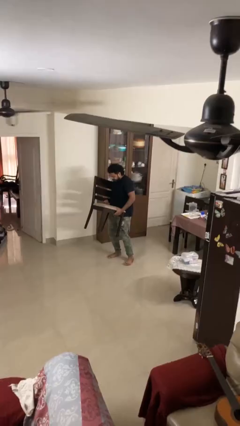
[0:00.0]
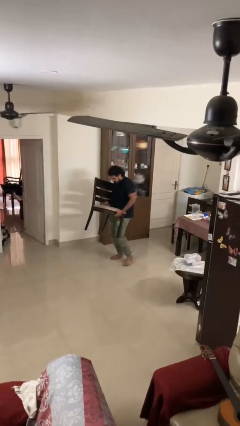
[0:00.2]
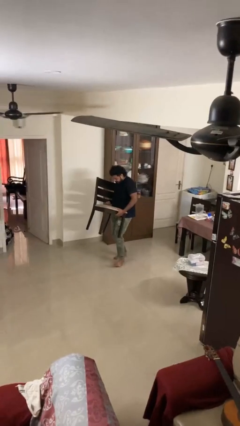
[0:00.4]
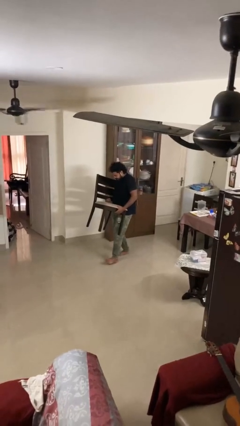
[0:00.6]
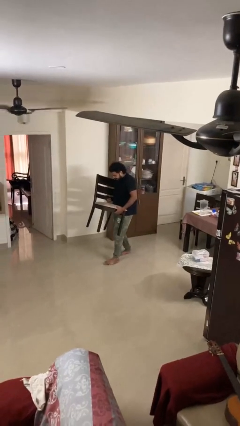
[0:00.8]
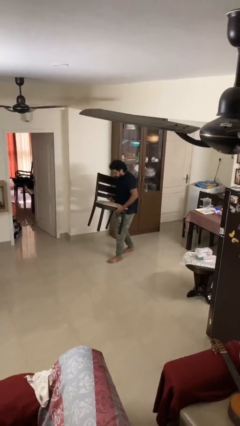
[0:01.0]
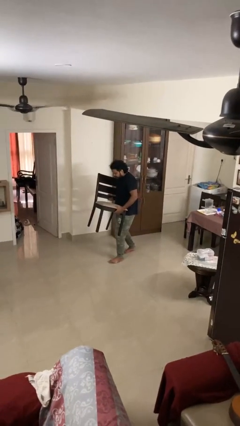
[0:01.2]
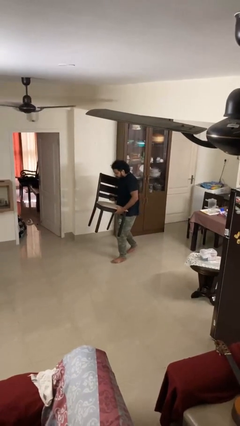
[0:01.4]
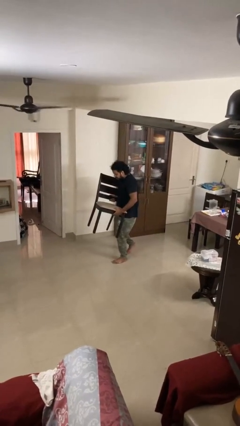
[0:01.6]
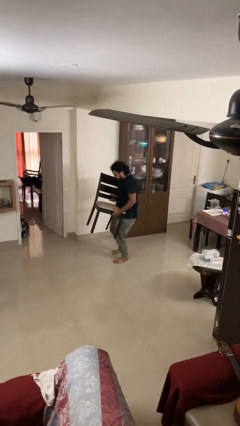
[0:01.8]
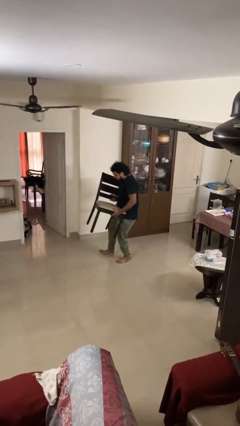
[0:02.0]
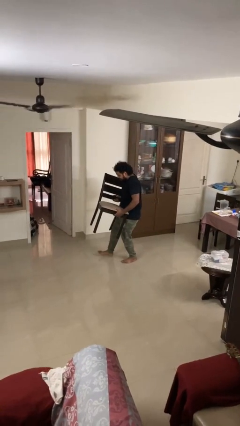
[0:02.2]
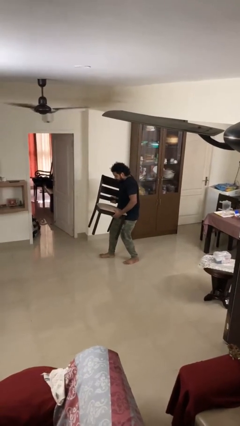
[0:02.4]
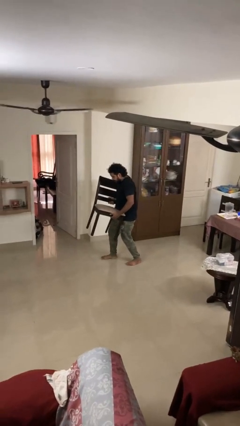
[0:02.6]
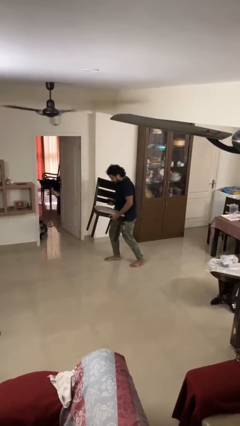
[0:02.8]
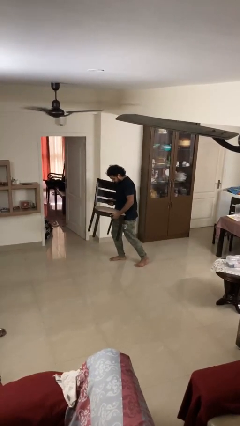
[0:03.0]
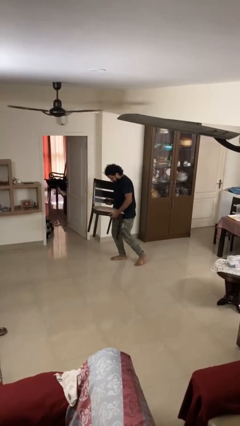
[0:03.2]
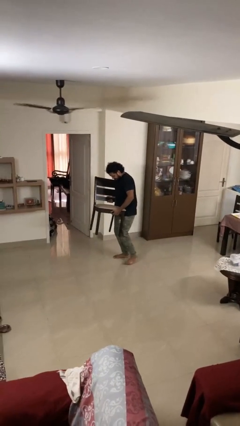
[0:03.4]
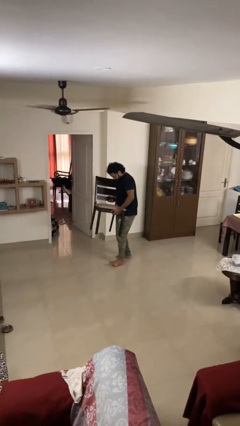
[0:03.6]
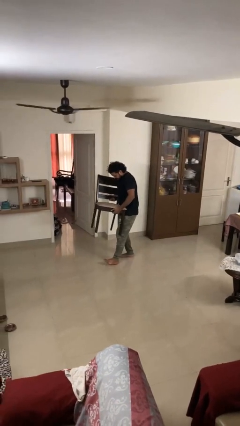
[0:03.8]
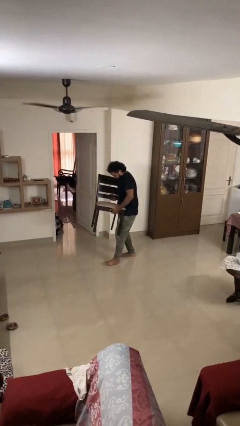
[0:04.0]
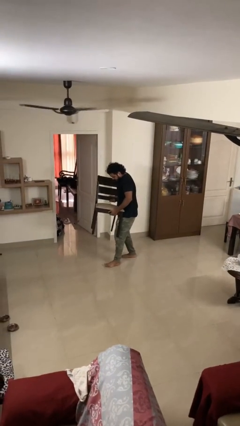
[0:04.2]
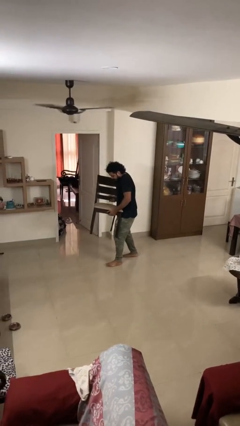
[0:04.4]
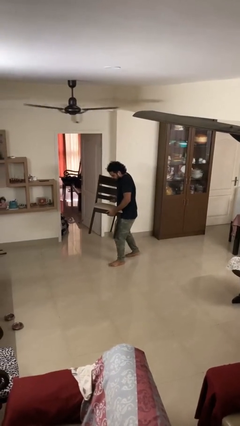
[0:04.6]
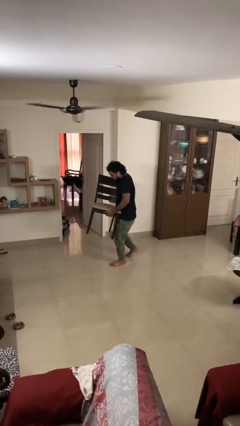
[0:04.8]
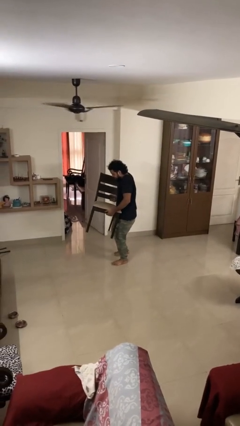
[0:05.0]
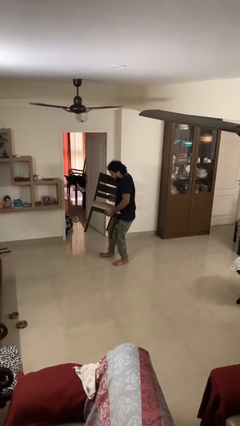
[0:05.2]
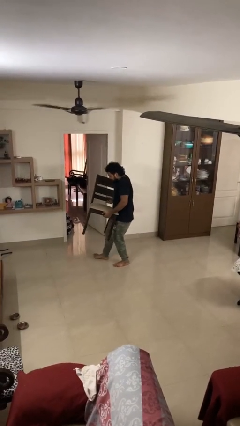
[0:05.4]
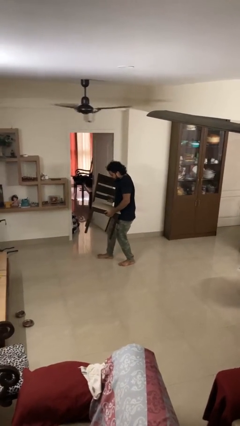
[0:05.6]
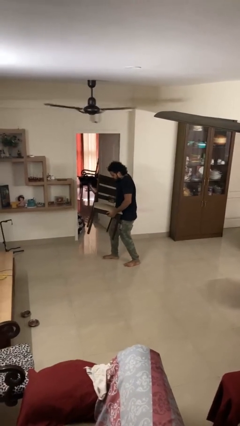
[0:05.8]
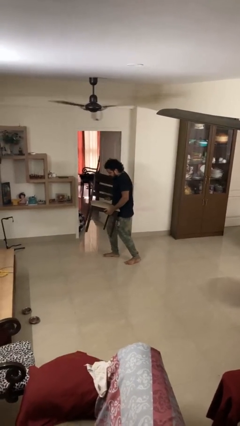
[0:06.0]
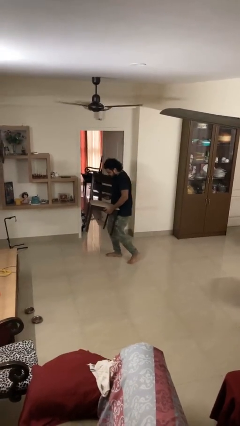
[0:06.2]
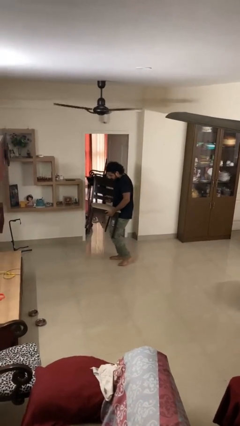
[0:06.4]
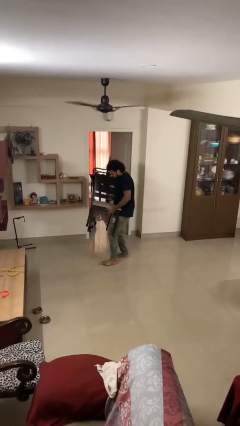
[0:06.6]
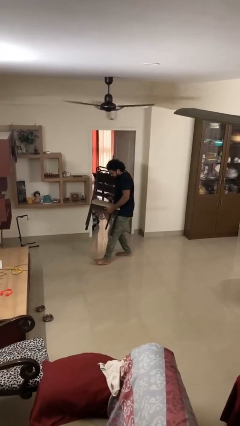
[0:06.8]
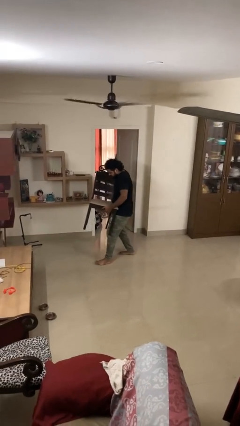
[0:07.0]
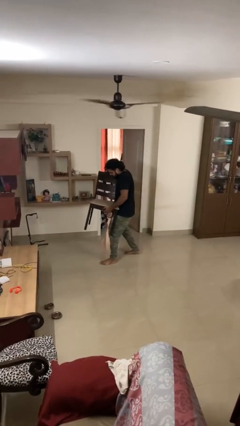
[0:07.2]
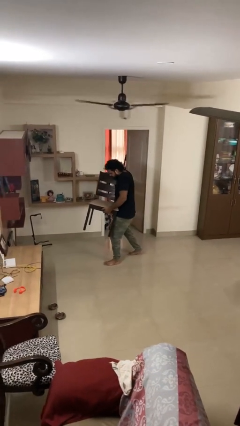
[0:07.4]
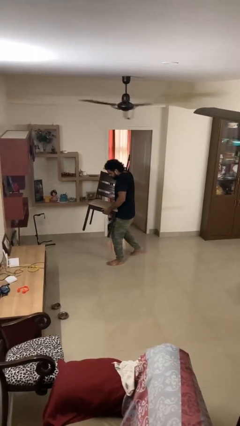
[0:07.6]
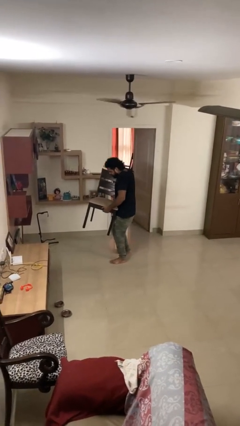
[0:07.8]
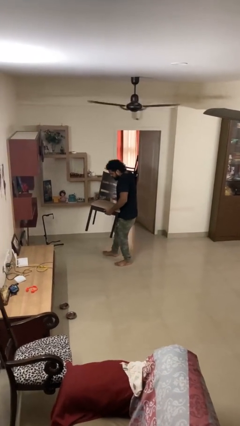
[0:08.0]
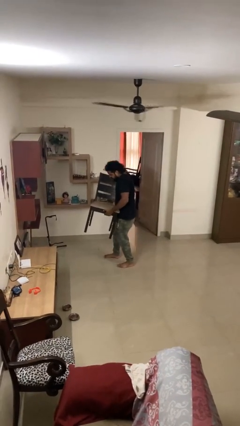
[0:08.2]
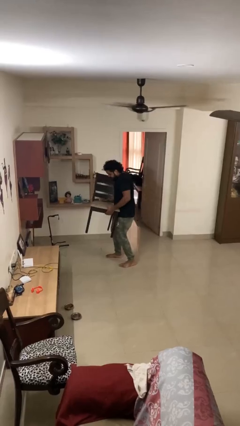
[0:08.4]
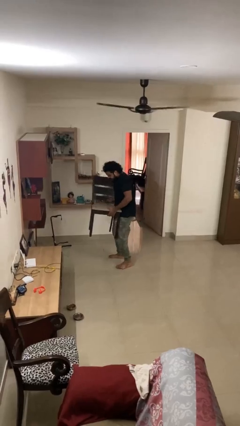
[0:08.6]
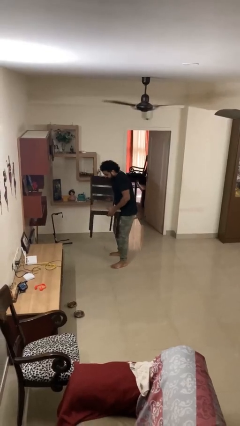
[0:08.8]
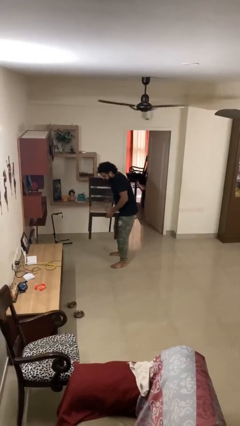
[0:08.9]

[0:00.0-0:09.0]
person carries heavy object

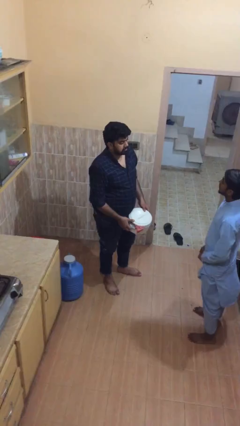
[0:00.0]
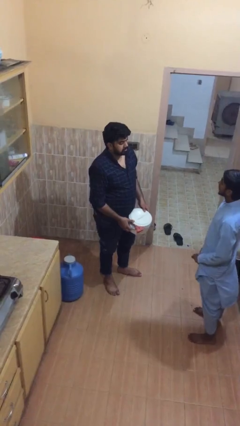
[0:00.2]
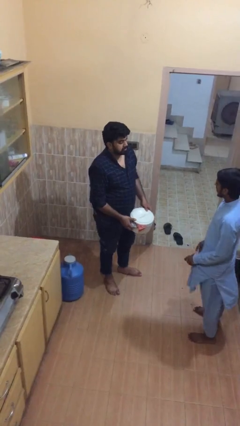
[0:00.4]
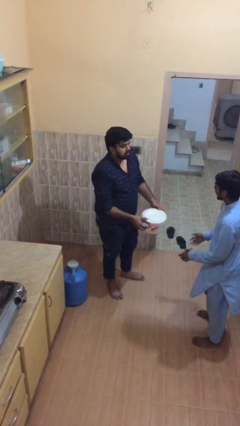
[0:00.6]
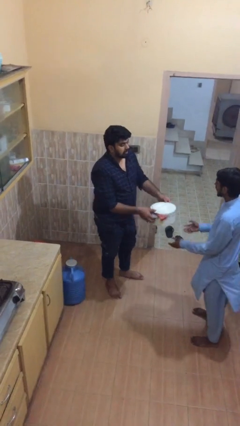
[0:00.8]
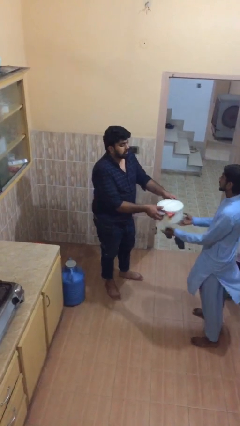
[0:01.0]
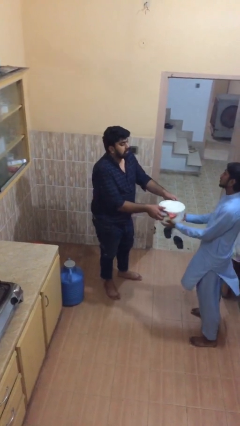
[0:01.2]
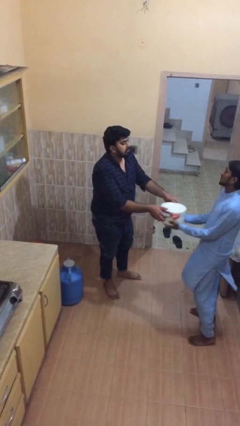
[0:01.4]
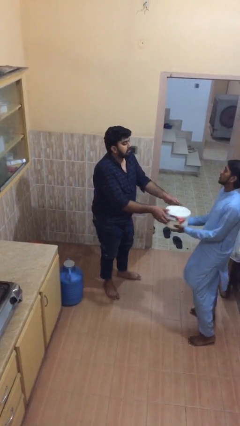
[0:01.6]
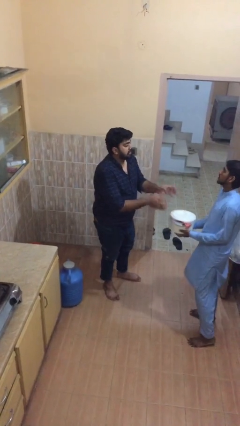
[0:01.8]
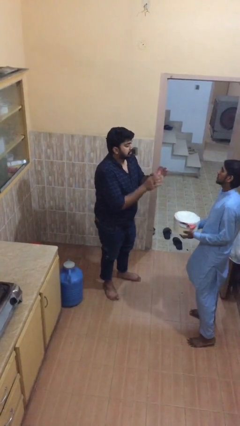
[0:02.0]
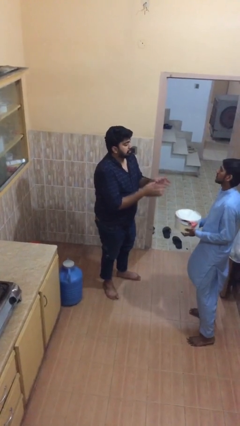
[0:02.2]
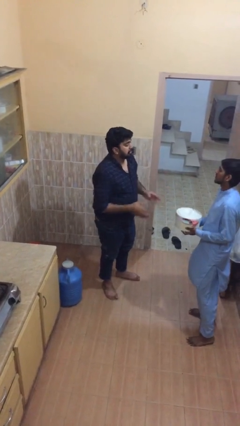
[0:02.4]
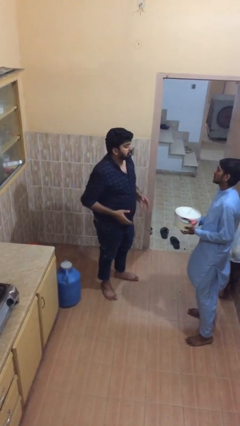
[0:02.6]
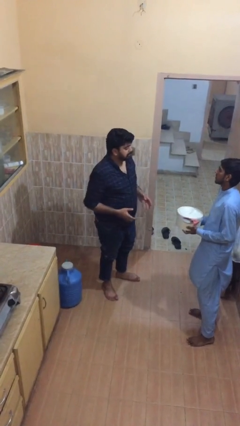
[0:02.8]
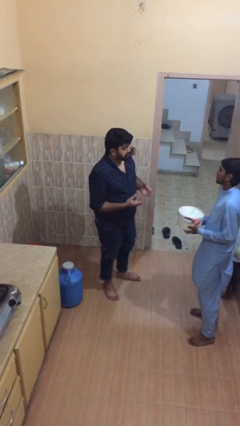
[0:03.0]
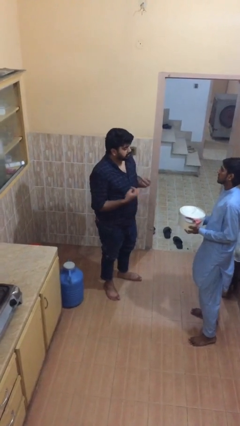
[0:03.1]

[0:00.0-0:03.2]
person transfers object to person

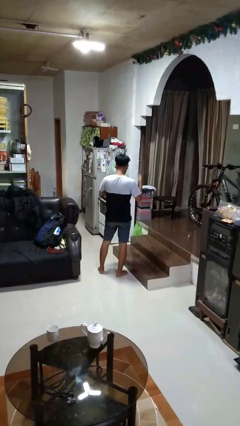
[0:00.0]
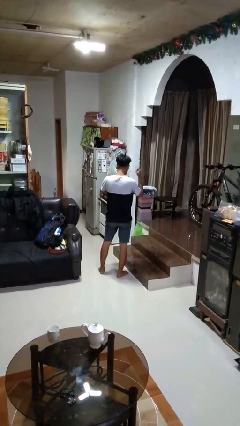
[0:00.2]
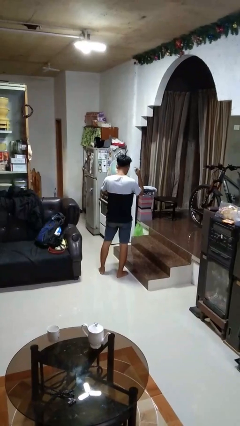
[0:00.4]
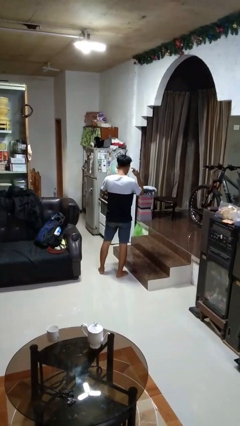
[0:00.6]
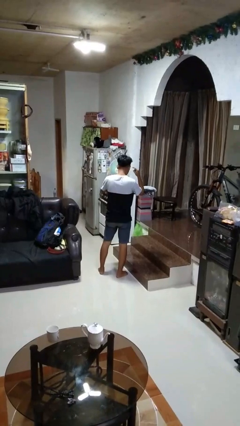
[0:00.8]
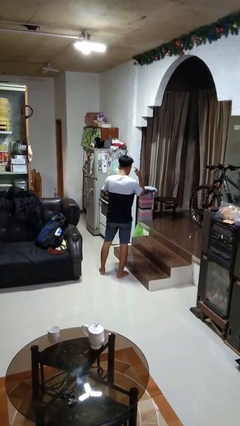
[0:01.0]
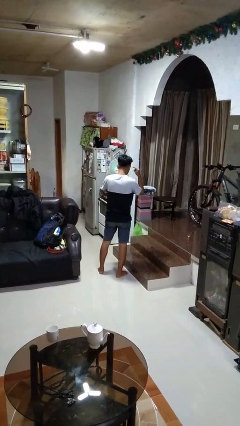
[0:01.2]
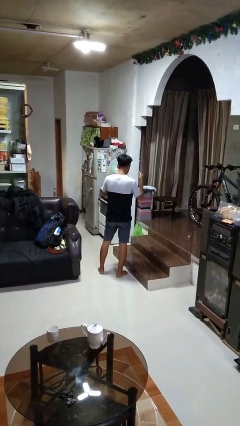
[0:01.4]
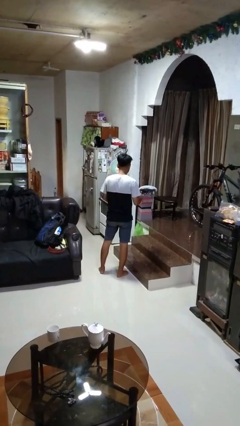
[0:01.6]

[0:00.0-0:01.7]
person gestures listen closely

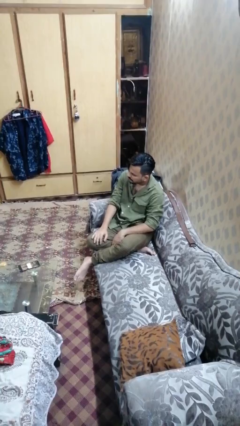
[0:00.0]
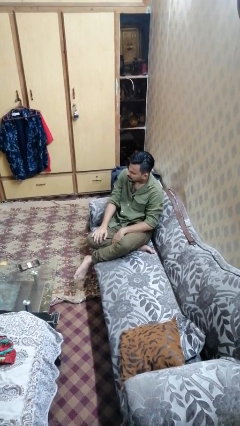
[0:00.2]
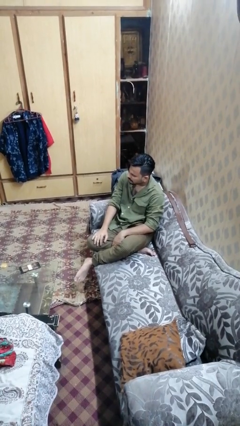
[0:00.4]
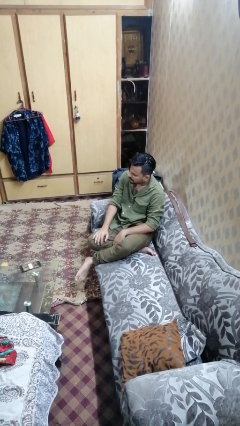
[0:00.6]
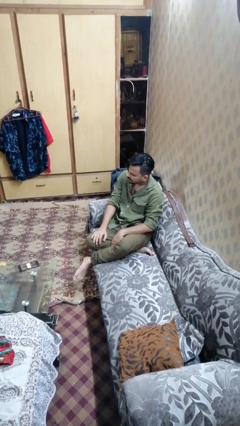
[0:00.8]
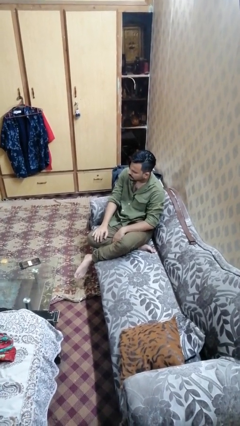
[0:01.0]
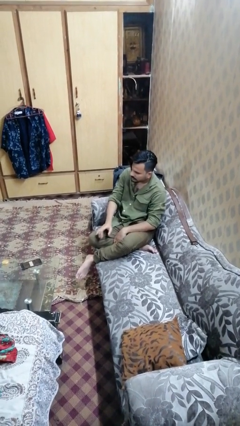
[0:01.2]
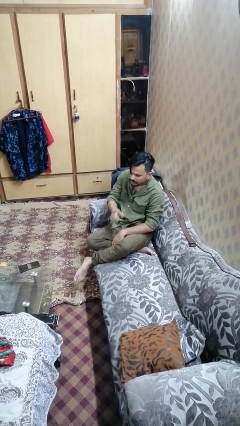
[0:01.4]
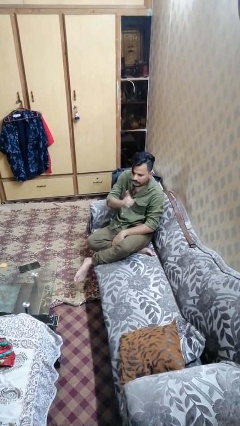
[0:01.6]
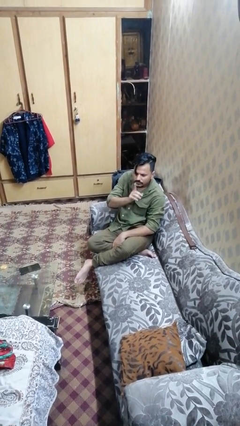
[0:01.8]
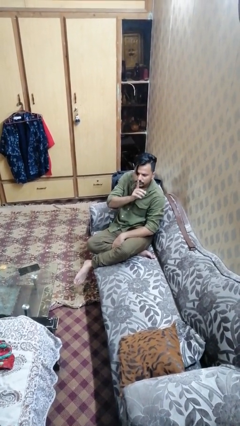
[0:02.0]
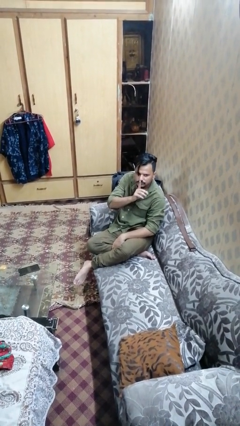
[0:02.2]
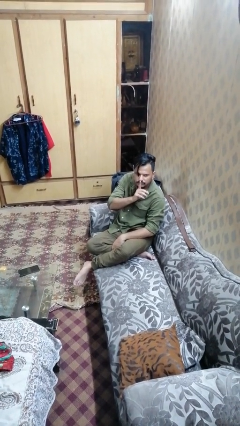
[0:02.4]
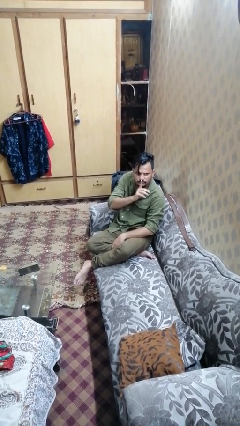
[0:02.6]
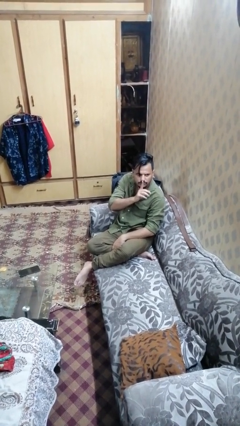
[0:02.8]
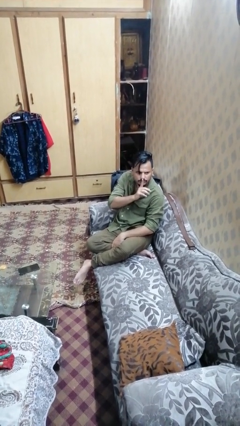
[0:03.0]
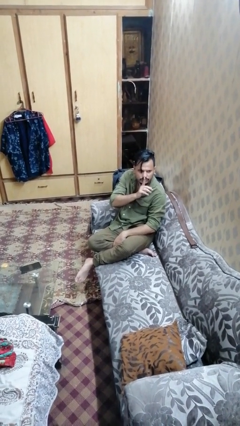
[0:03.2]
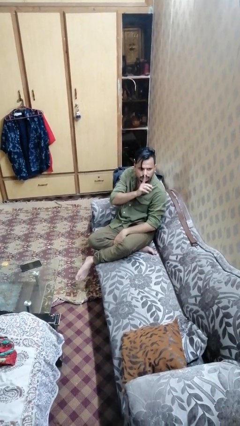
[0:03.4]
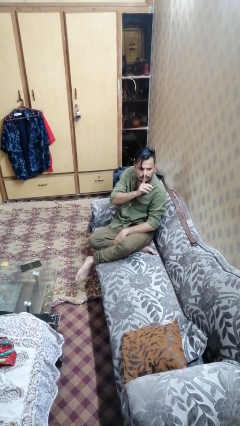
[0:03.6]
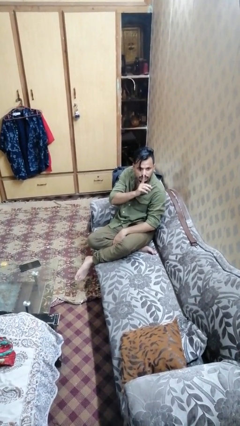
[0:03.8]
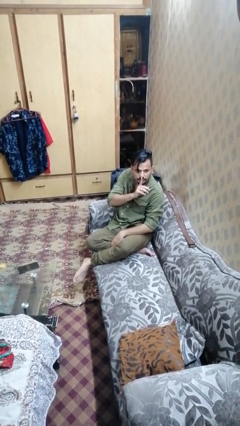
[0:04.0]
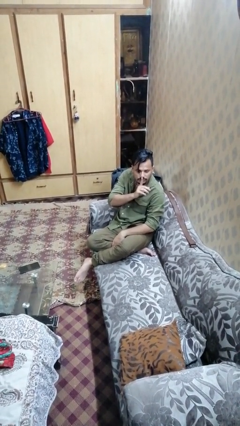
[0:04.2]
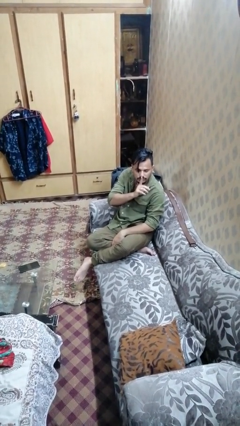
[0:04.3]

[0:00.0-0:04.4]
person gestures be quiet
